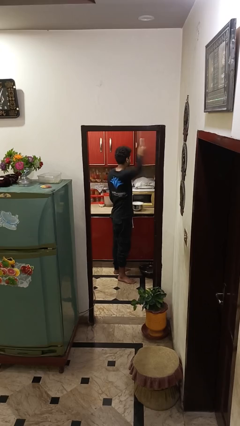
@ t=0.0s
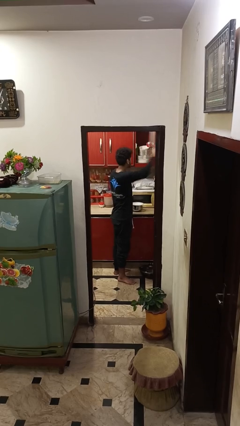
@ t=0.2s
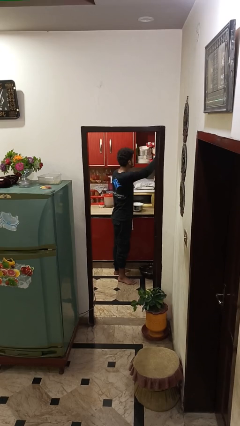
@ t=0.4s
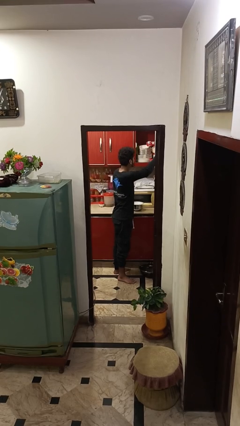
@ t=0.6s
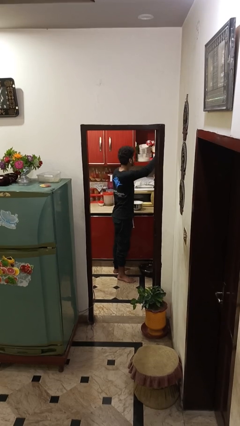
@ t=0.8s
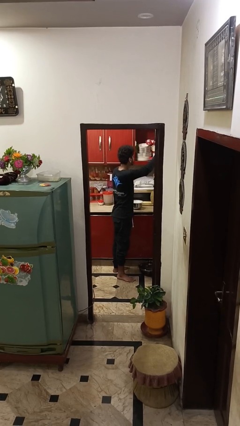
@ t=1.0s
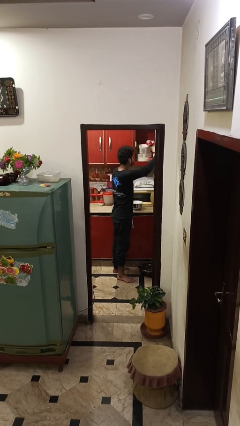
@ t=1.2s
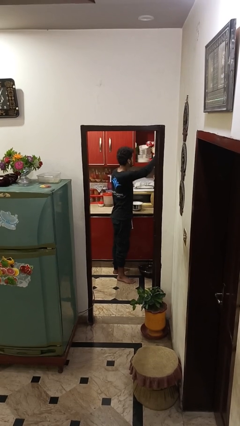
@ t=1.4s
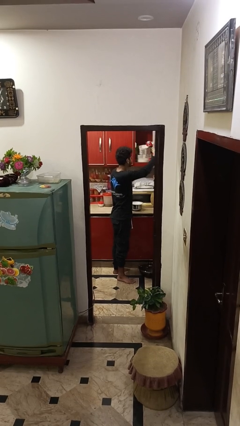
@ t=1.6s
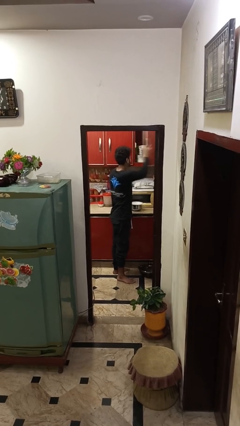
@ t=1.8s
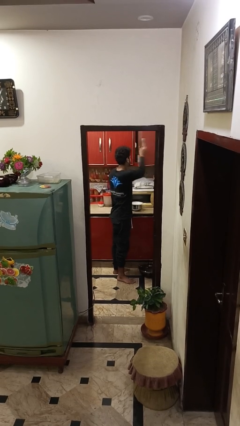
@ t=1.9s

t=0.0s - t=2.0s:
person opens cabinet

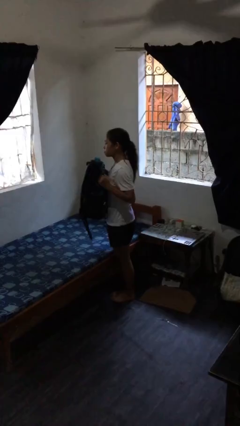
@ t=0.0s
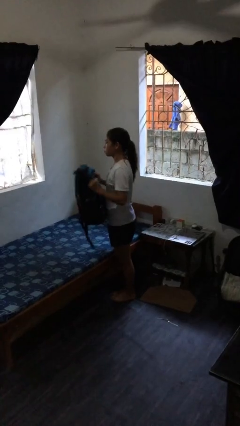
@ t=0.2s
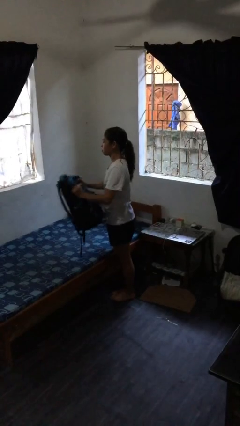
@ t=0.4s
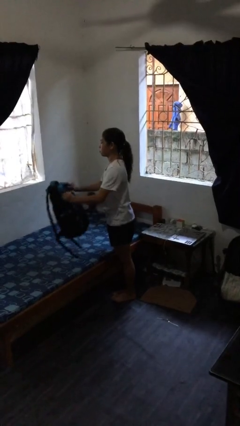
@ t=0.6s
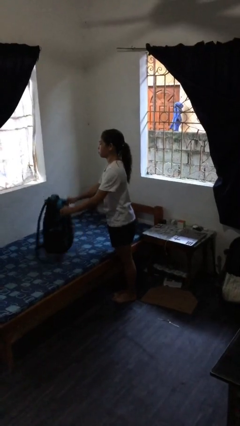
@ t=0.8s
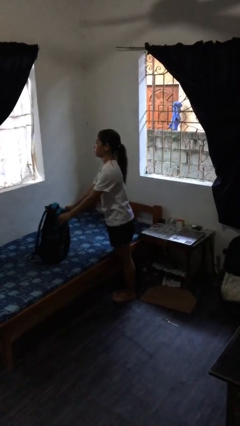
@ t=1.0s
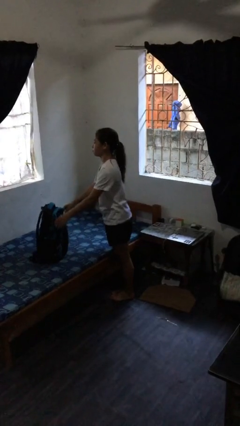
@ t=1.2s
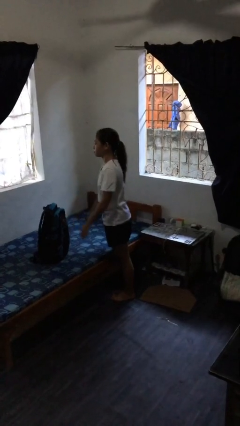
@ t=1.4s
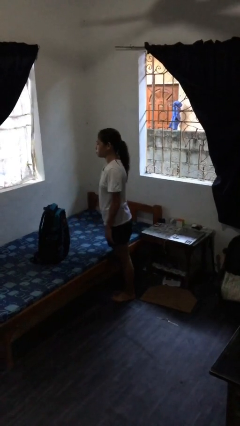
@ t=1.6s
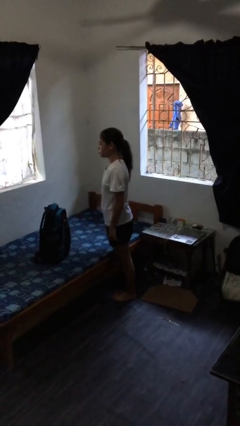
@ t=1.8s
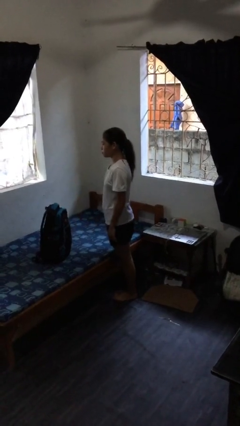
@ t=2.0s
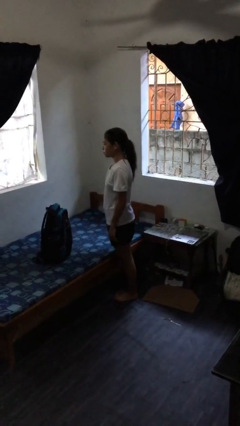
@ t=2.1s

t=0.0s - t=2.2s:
person puts down object on bed

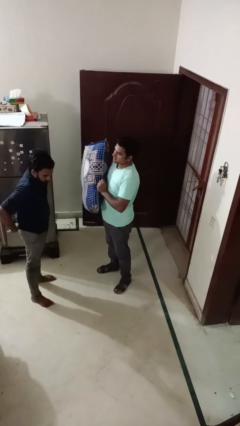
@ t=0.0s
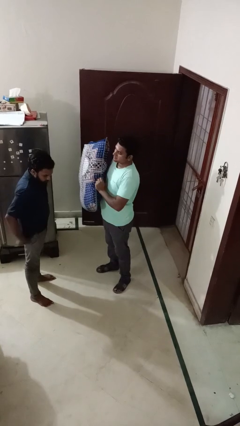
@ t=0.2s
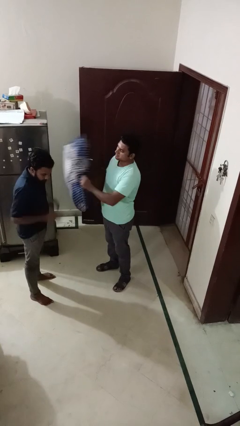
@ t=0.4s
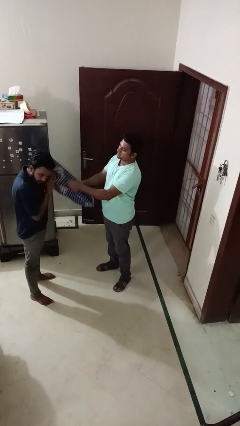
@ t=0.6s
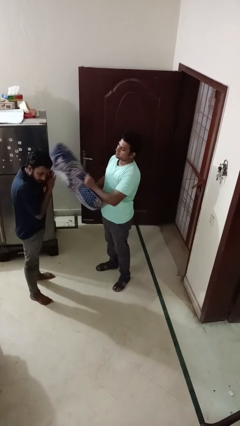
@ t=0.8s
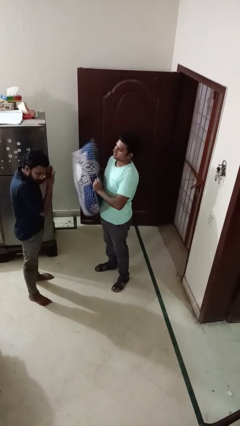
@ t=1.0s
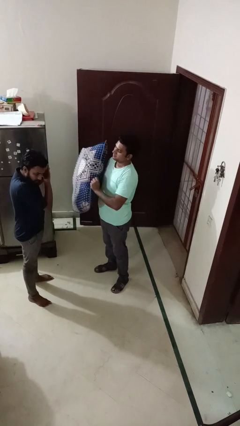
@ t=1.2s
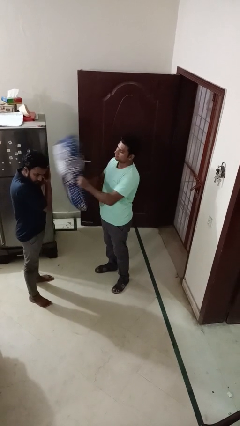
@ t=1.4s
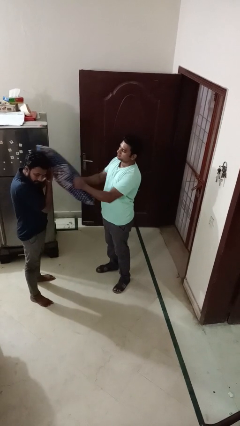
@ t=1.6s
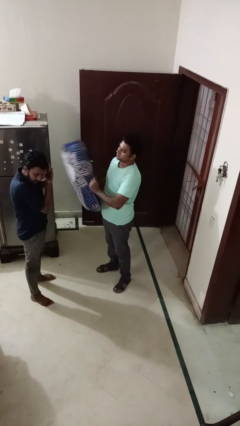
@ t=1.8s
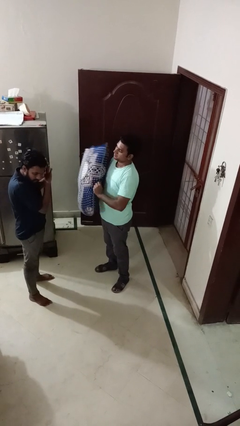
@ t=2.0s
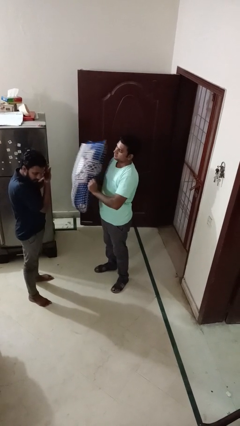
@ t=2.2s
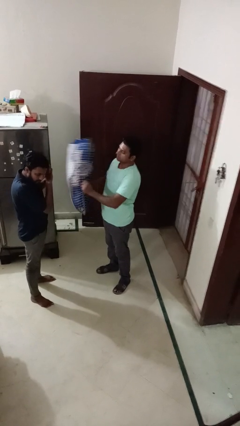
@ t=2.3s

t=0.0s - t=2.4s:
person hits person with pillow

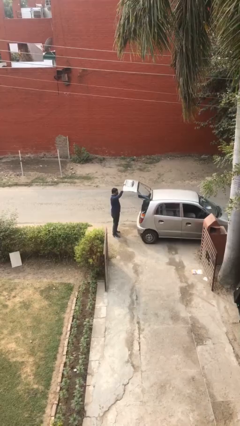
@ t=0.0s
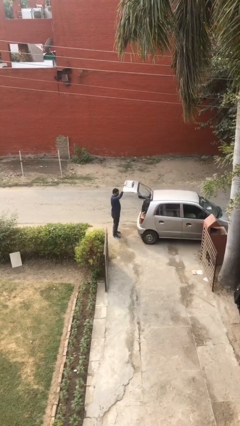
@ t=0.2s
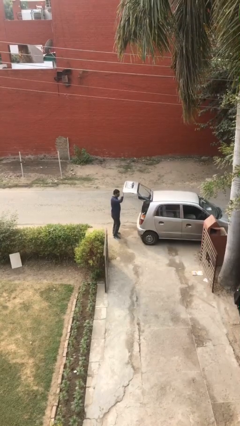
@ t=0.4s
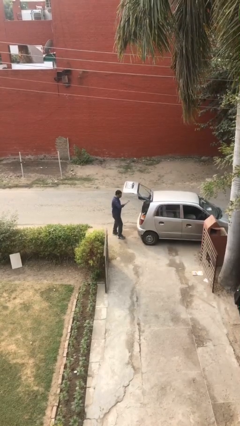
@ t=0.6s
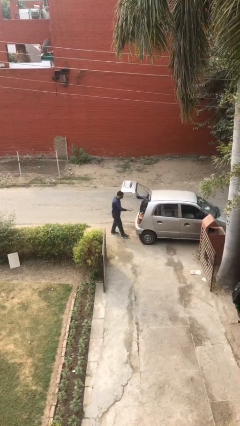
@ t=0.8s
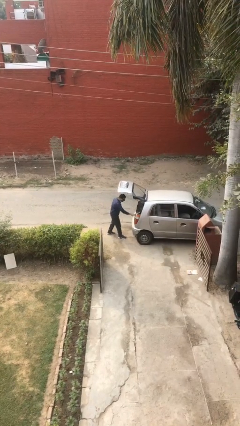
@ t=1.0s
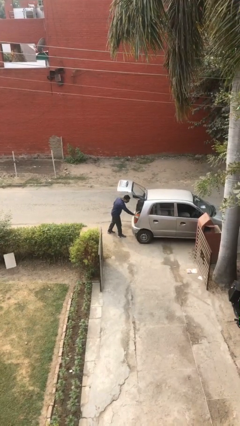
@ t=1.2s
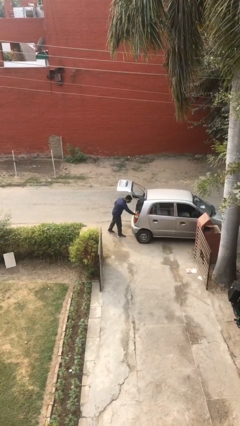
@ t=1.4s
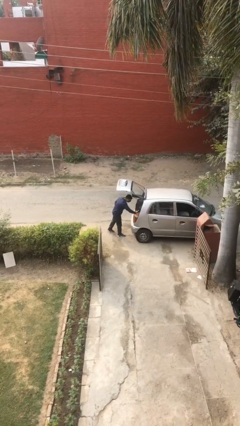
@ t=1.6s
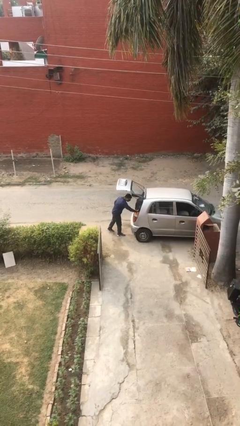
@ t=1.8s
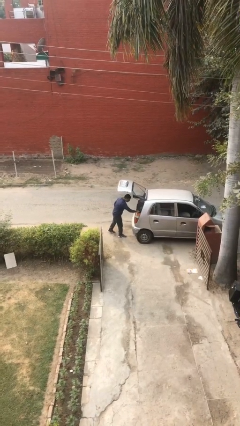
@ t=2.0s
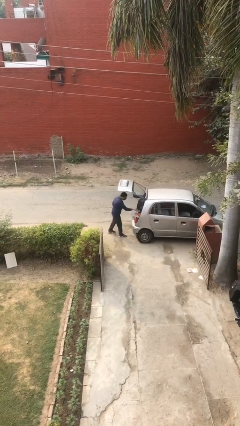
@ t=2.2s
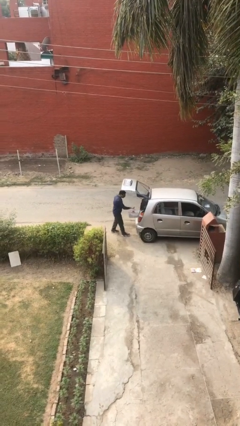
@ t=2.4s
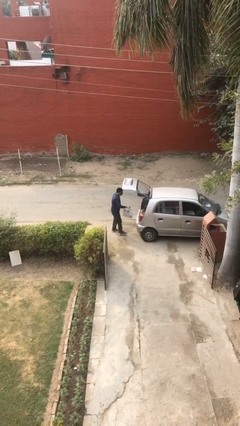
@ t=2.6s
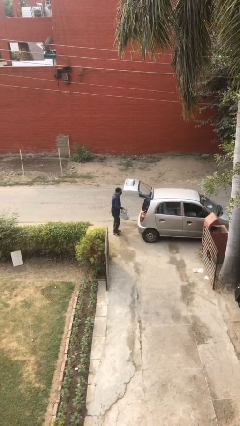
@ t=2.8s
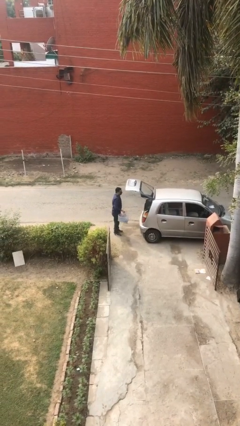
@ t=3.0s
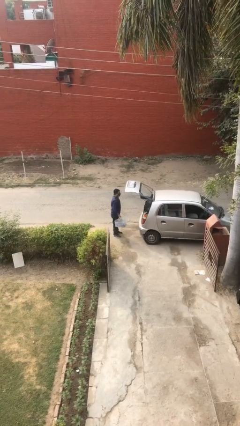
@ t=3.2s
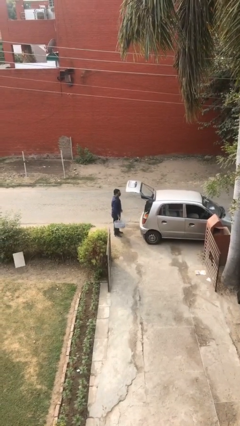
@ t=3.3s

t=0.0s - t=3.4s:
person unloads car

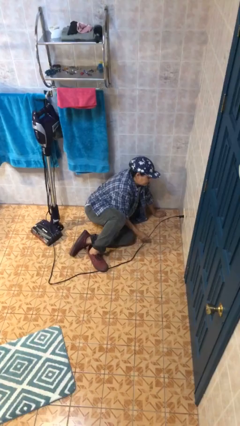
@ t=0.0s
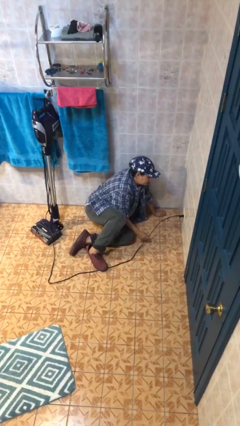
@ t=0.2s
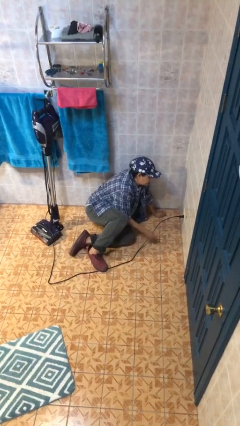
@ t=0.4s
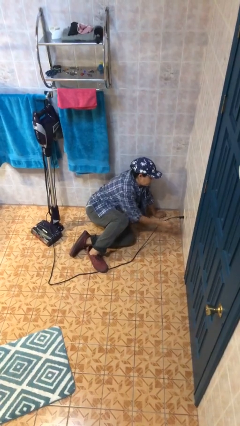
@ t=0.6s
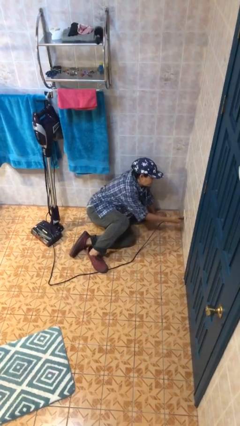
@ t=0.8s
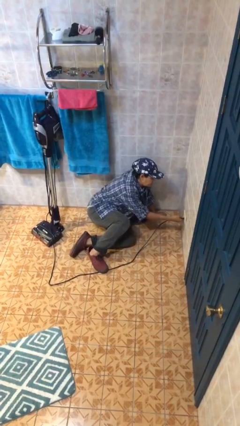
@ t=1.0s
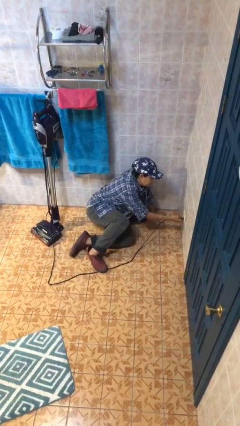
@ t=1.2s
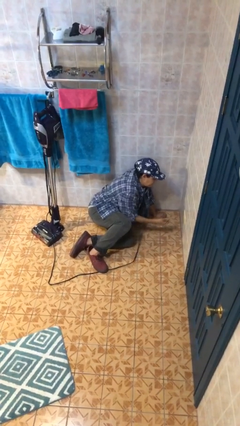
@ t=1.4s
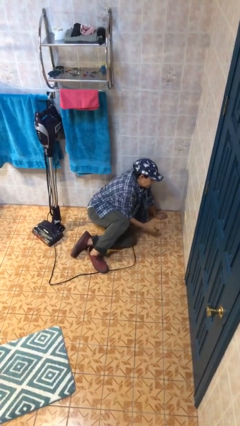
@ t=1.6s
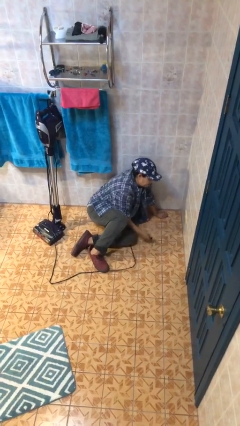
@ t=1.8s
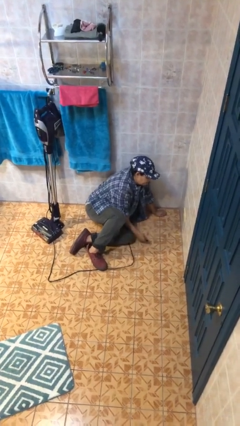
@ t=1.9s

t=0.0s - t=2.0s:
person unplugs from electrical socket

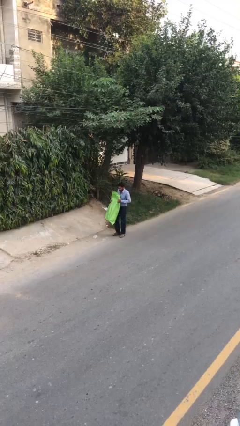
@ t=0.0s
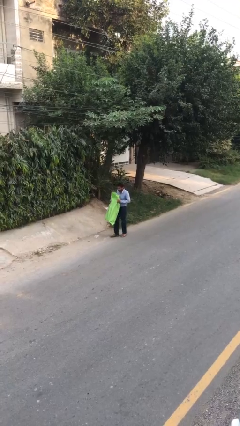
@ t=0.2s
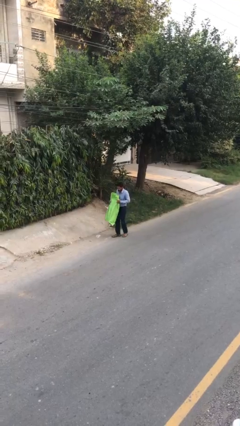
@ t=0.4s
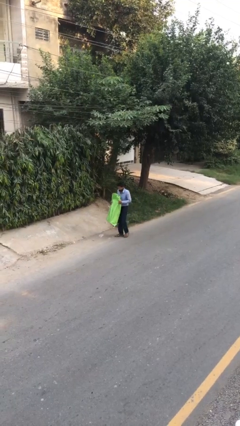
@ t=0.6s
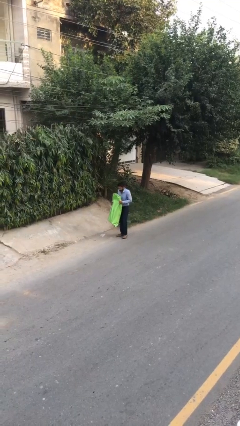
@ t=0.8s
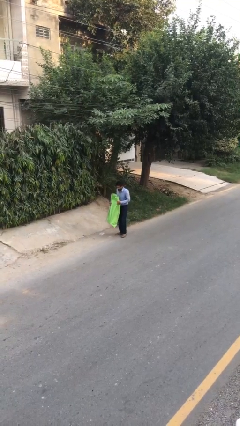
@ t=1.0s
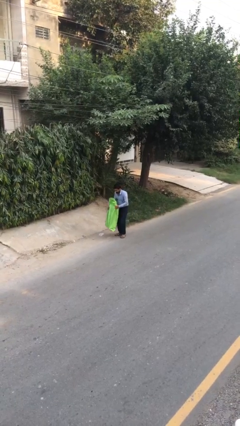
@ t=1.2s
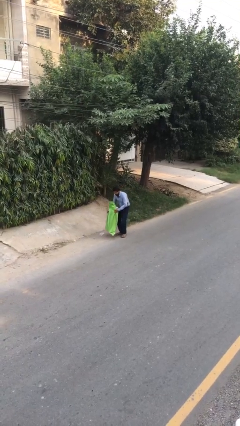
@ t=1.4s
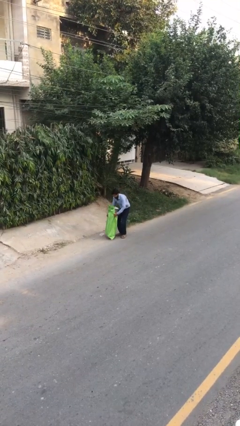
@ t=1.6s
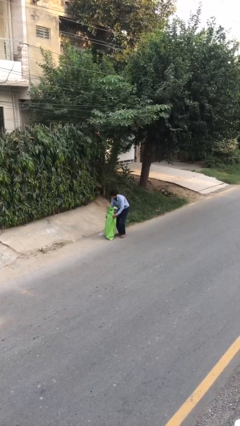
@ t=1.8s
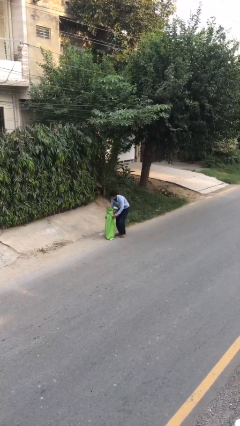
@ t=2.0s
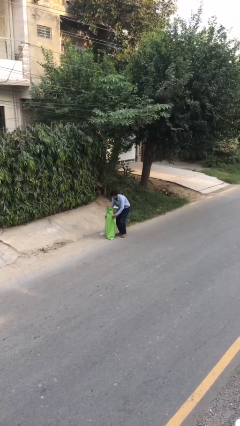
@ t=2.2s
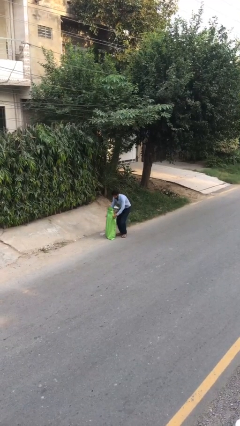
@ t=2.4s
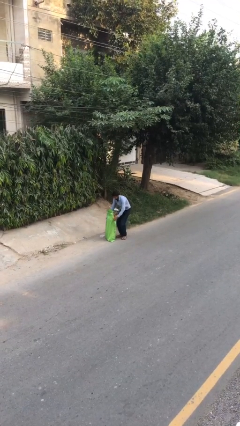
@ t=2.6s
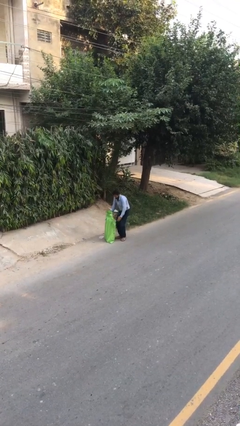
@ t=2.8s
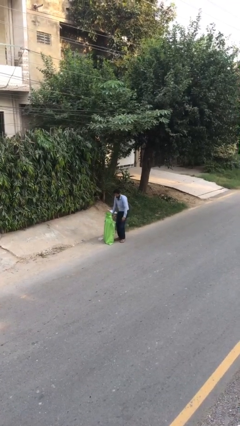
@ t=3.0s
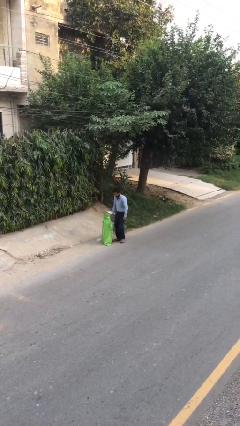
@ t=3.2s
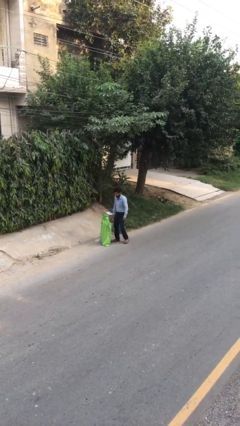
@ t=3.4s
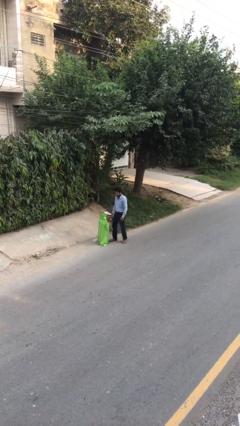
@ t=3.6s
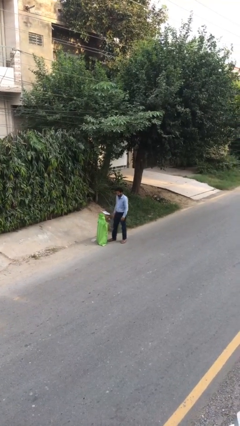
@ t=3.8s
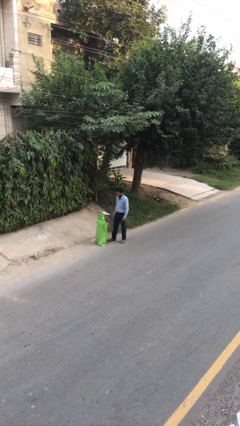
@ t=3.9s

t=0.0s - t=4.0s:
person puts down object on floor

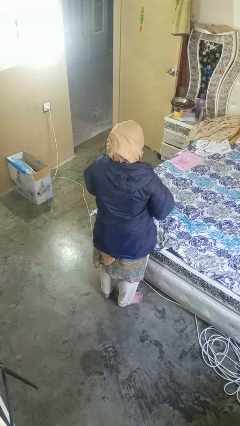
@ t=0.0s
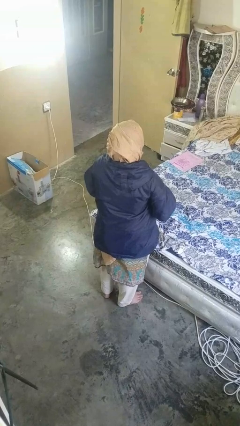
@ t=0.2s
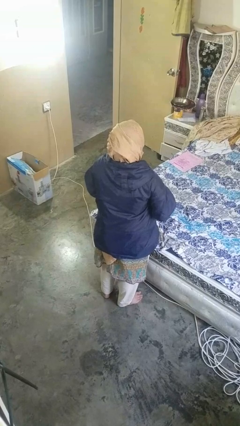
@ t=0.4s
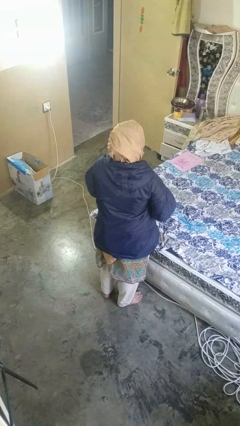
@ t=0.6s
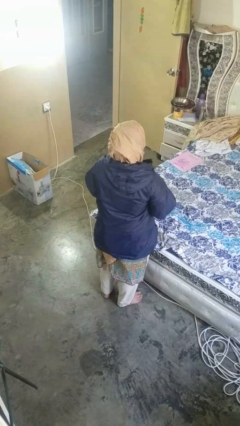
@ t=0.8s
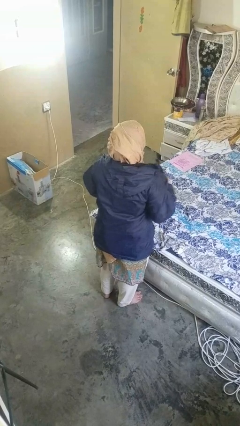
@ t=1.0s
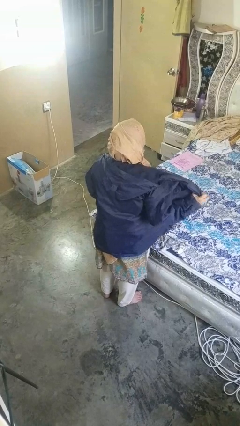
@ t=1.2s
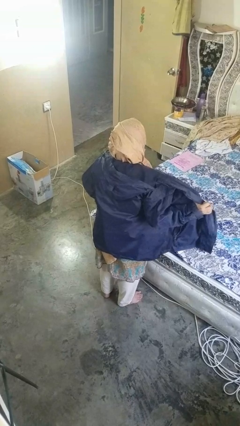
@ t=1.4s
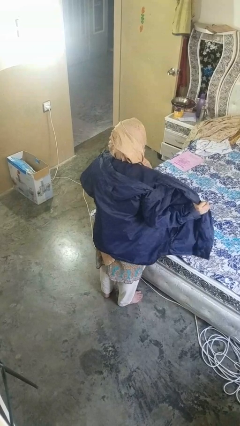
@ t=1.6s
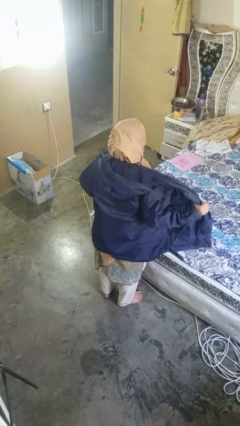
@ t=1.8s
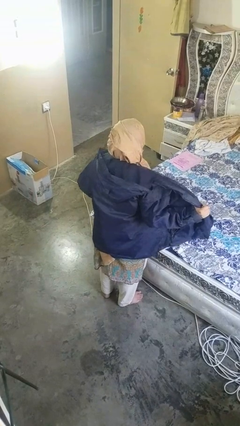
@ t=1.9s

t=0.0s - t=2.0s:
person unzips jacket
